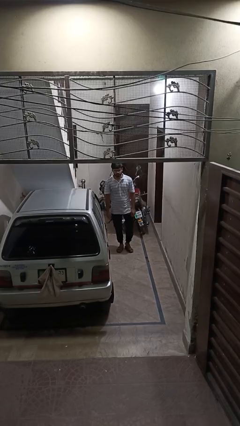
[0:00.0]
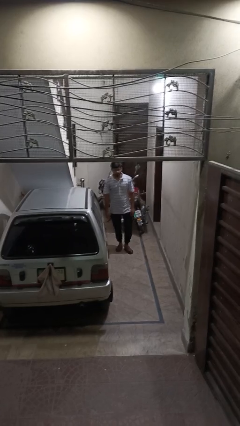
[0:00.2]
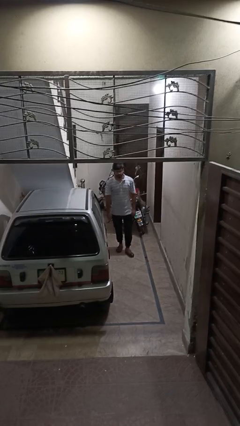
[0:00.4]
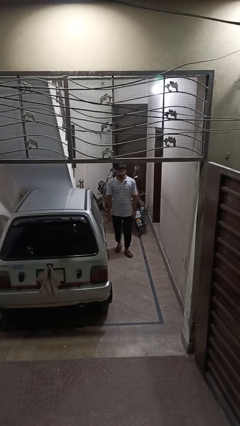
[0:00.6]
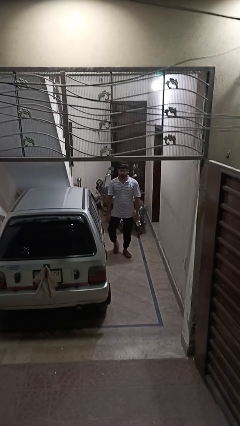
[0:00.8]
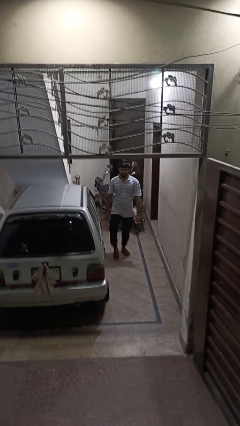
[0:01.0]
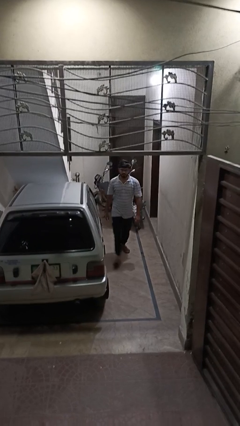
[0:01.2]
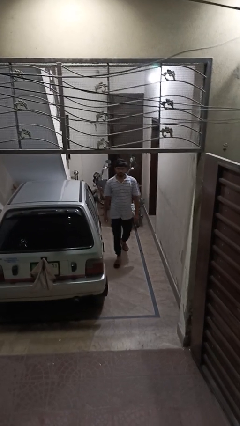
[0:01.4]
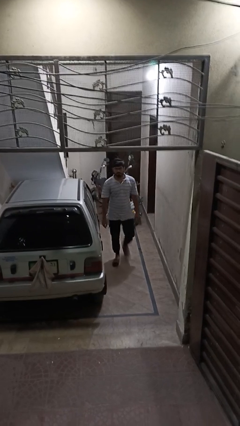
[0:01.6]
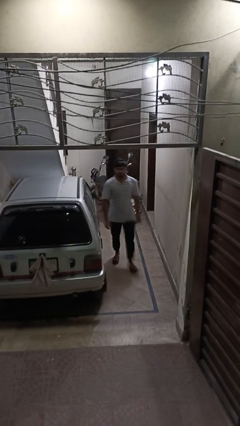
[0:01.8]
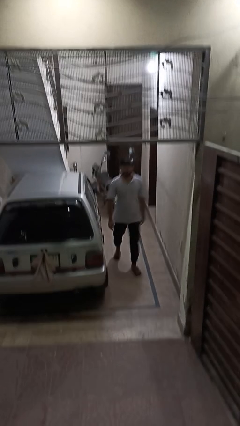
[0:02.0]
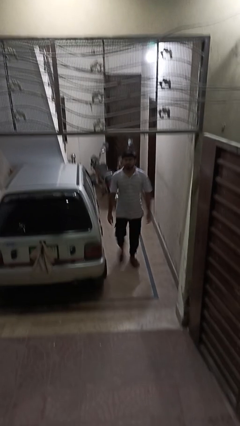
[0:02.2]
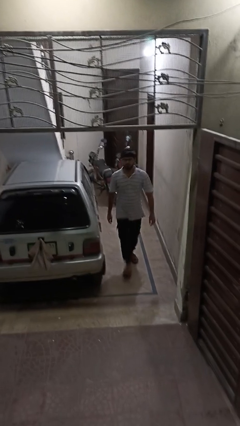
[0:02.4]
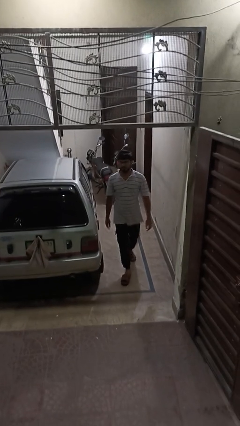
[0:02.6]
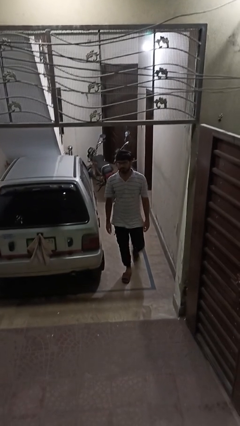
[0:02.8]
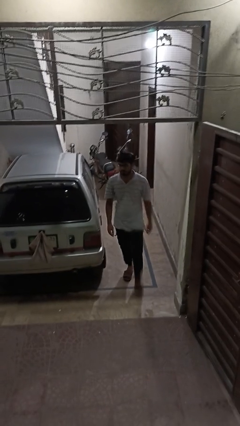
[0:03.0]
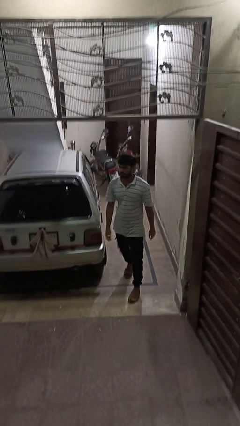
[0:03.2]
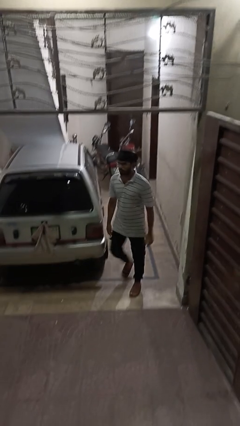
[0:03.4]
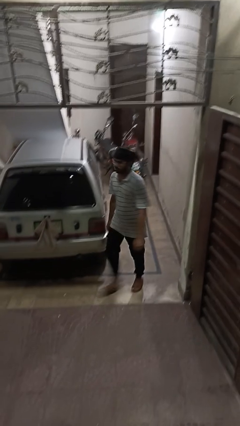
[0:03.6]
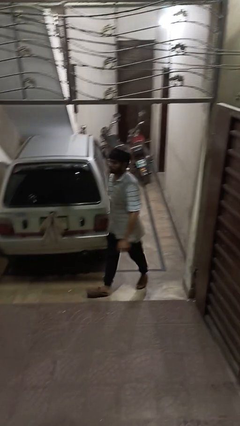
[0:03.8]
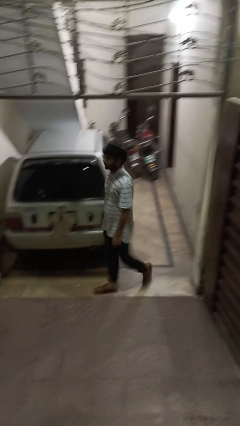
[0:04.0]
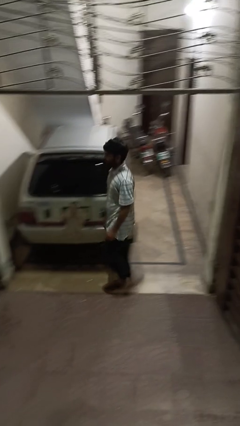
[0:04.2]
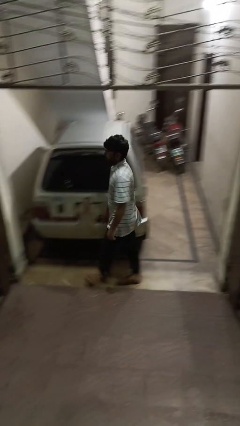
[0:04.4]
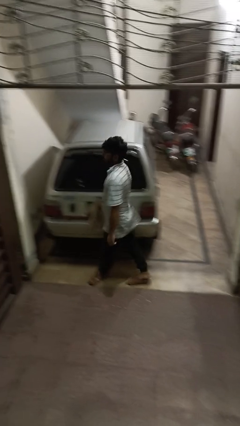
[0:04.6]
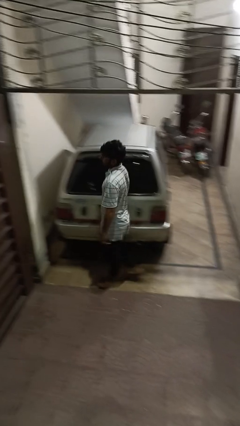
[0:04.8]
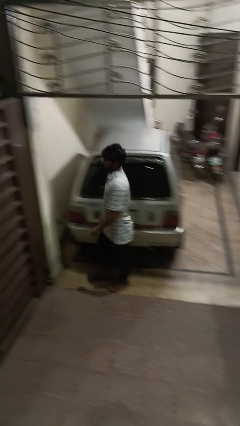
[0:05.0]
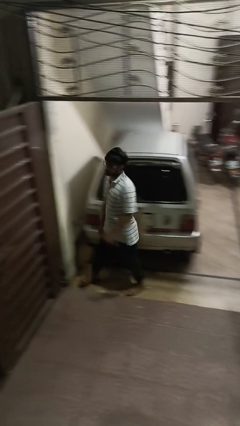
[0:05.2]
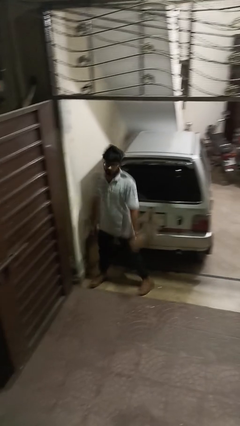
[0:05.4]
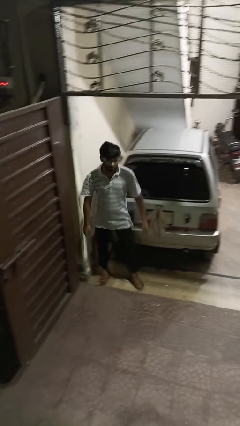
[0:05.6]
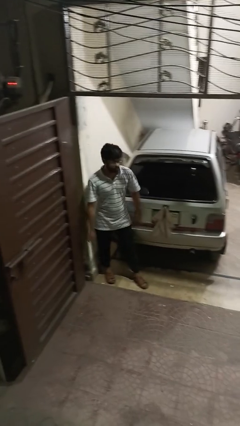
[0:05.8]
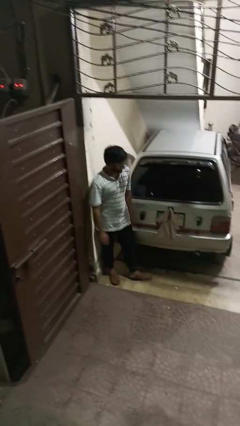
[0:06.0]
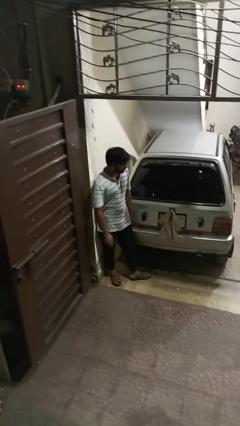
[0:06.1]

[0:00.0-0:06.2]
person walks around car

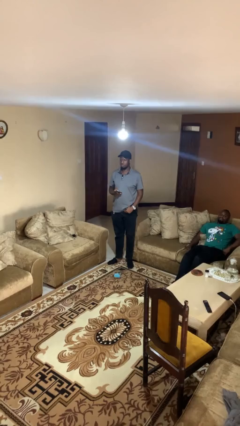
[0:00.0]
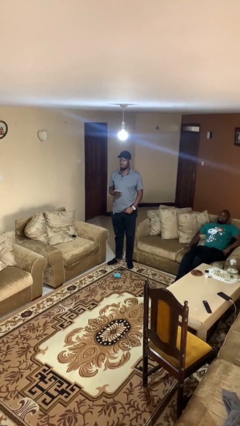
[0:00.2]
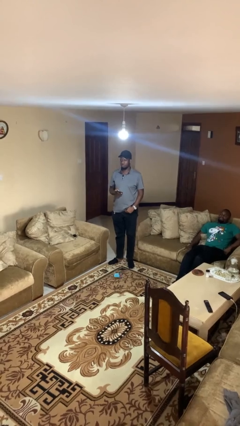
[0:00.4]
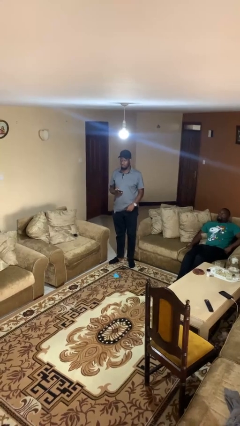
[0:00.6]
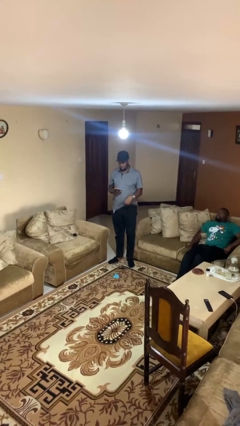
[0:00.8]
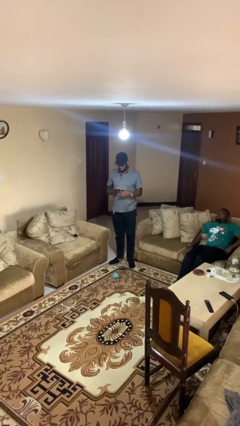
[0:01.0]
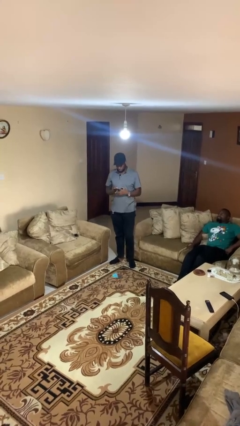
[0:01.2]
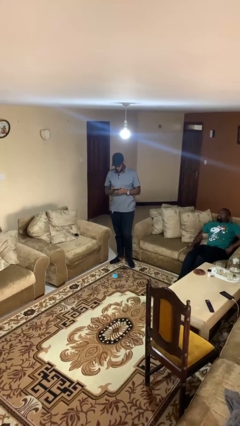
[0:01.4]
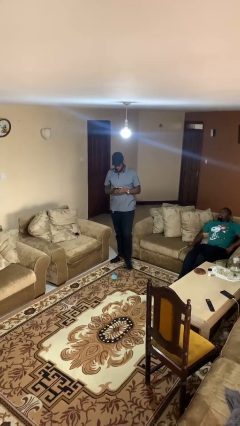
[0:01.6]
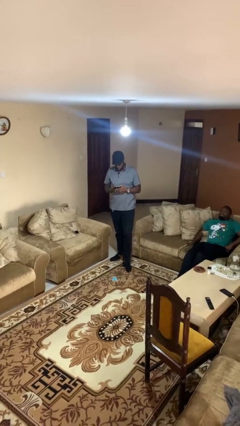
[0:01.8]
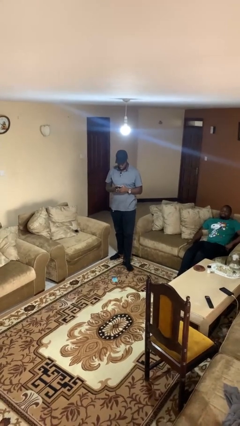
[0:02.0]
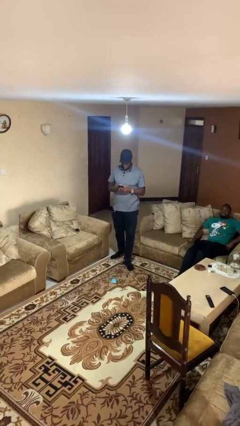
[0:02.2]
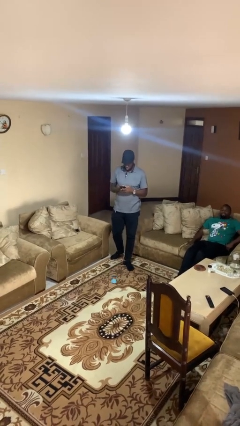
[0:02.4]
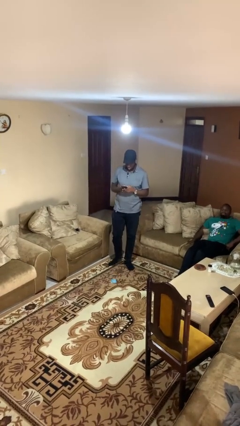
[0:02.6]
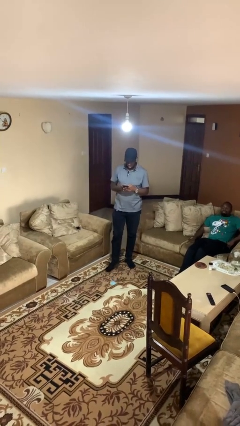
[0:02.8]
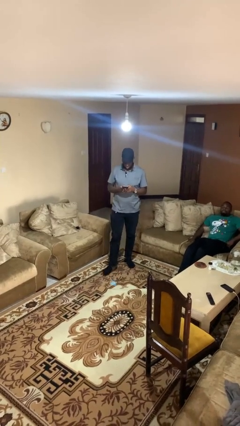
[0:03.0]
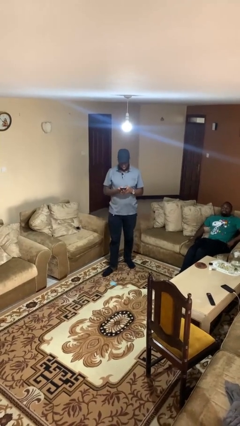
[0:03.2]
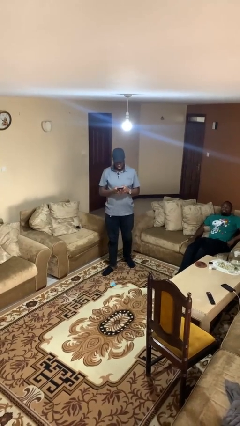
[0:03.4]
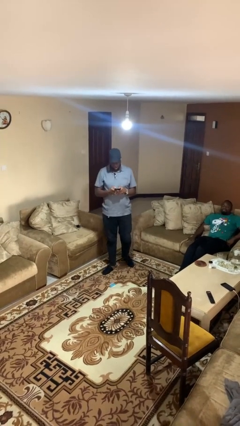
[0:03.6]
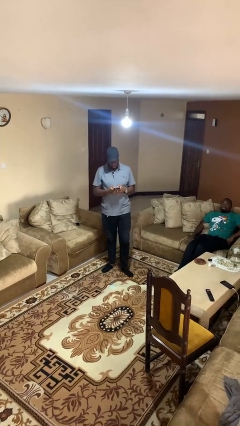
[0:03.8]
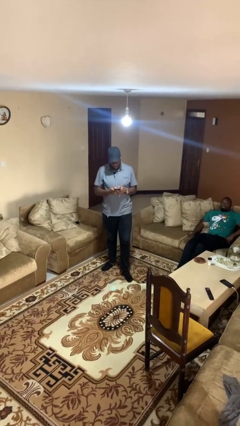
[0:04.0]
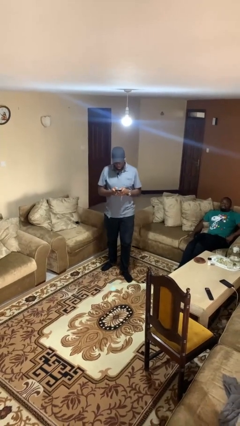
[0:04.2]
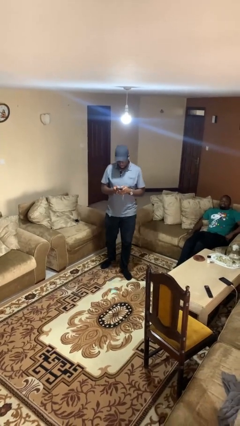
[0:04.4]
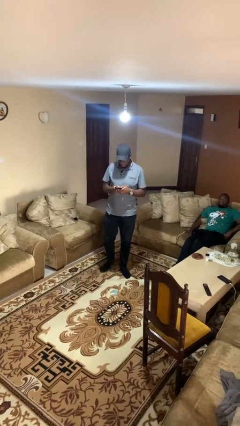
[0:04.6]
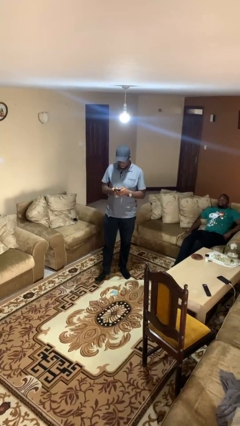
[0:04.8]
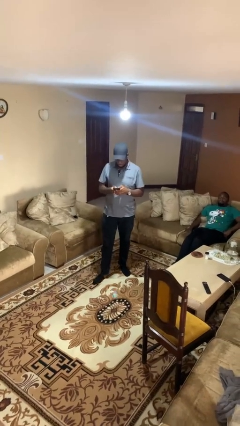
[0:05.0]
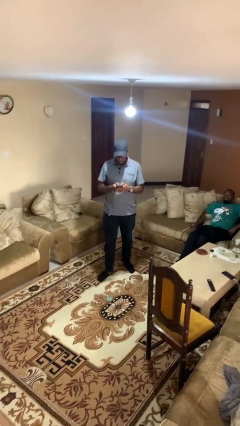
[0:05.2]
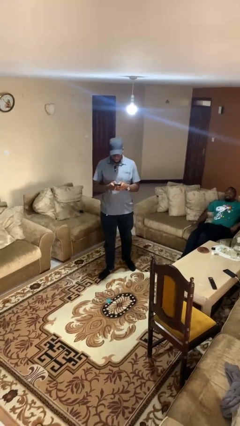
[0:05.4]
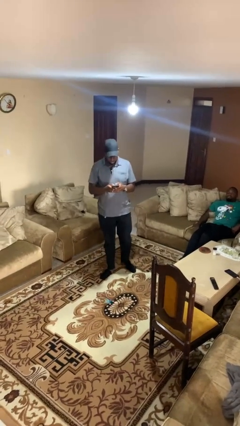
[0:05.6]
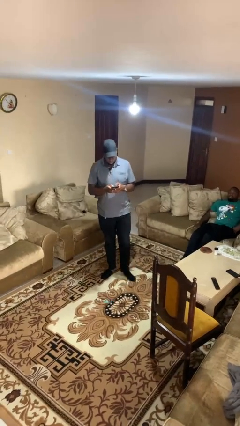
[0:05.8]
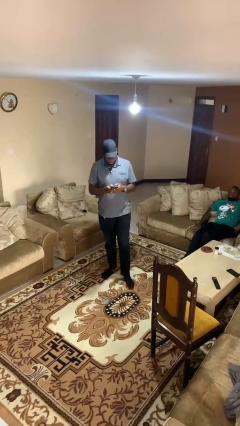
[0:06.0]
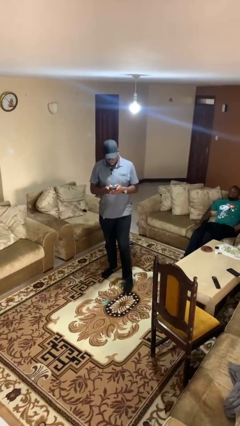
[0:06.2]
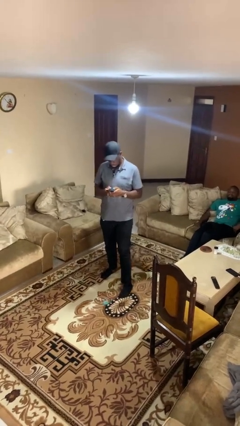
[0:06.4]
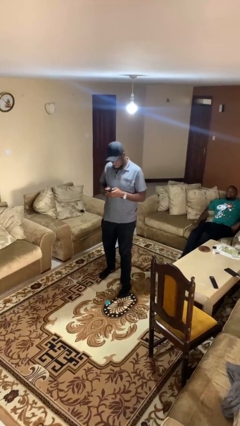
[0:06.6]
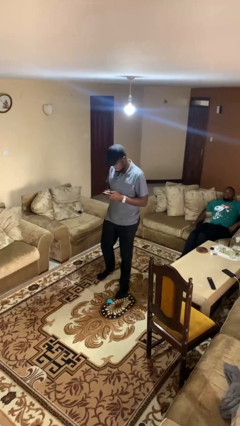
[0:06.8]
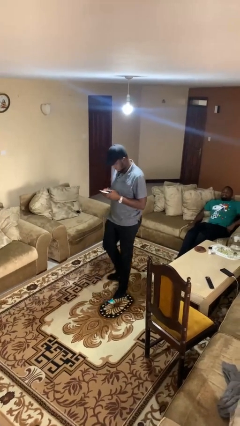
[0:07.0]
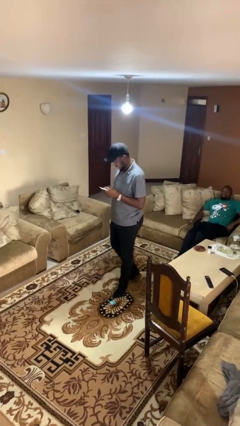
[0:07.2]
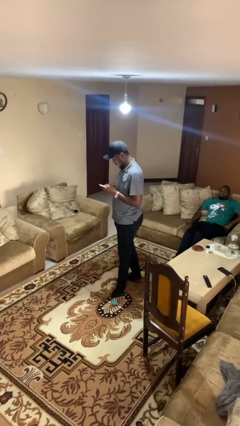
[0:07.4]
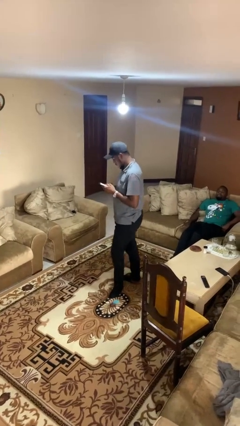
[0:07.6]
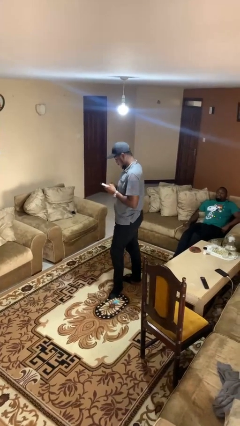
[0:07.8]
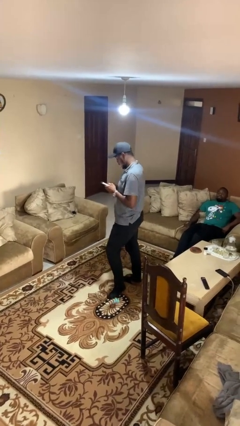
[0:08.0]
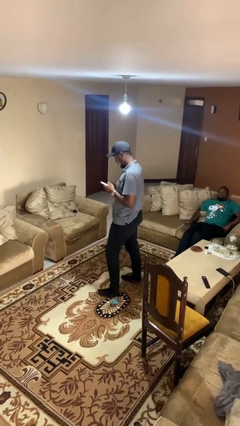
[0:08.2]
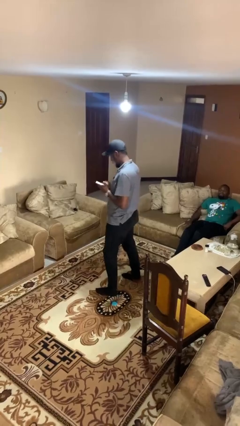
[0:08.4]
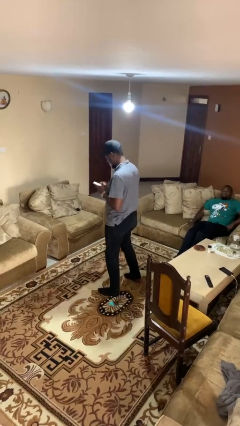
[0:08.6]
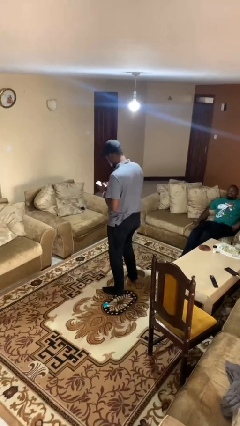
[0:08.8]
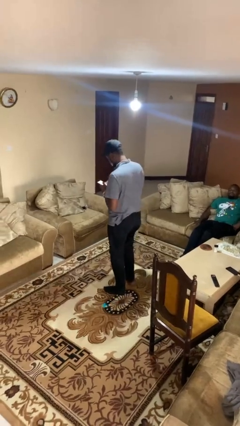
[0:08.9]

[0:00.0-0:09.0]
person texts on phone

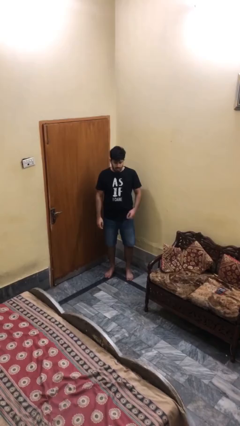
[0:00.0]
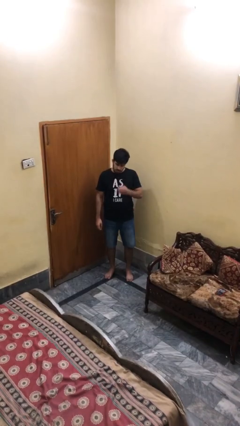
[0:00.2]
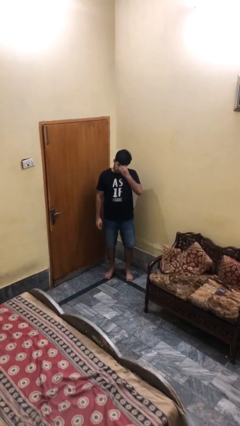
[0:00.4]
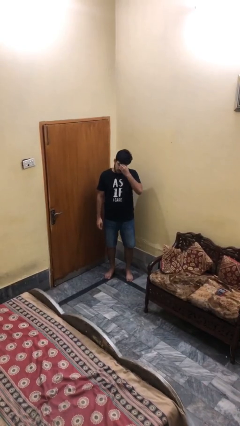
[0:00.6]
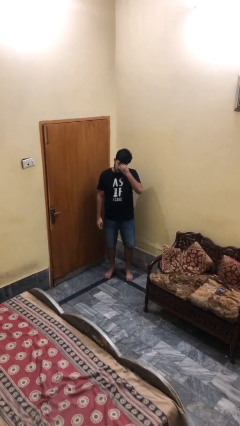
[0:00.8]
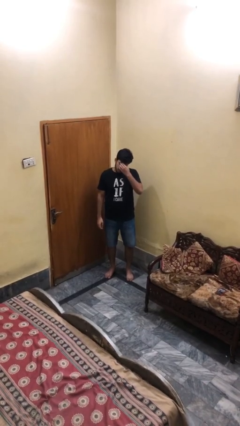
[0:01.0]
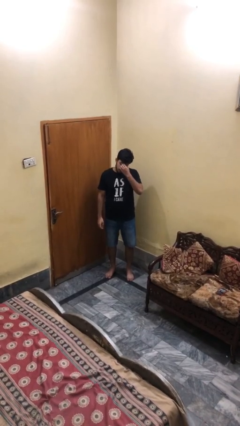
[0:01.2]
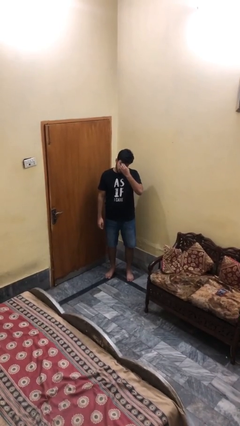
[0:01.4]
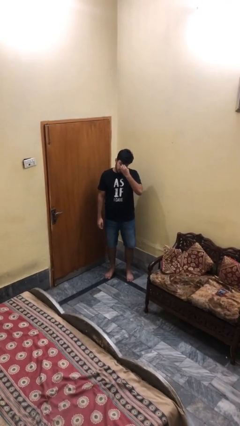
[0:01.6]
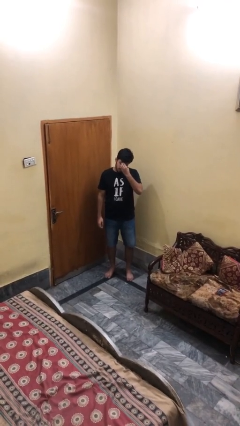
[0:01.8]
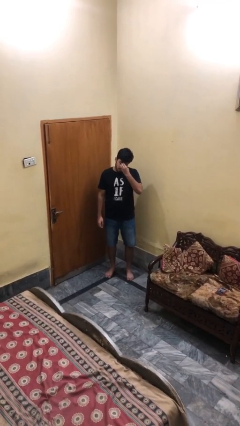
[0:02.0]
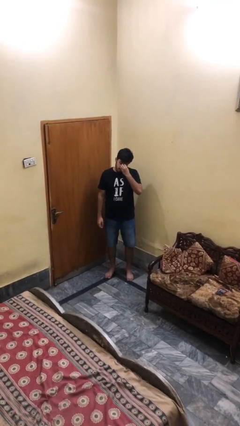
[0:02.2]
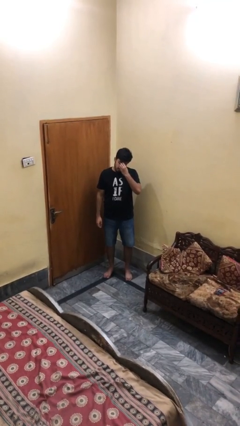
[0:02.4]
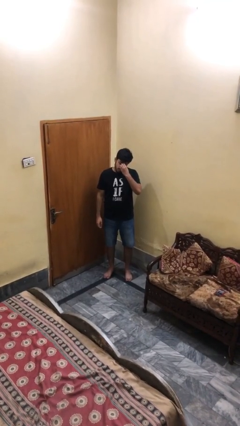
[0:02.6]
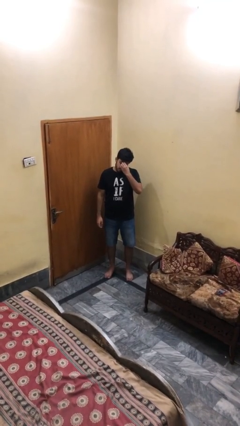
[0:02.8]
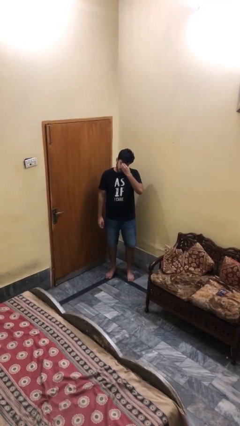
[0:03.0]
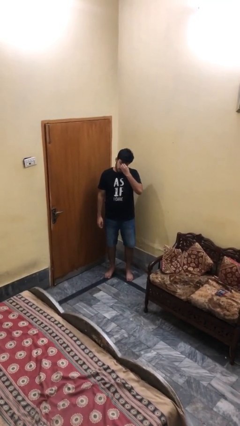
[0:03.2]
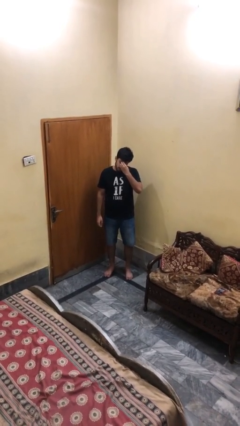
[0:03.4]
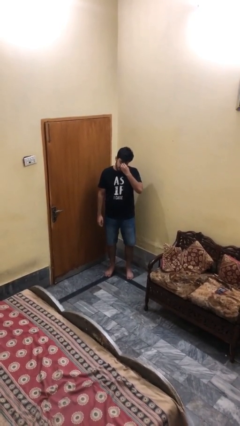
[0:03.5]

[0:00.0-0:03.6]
person scratches face
